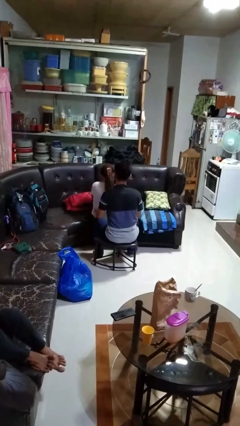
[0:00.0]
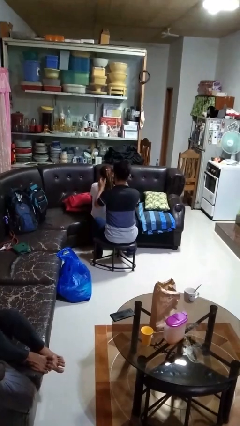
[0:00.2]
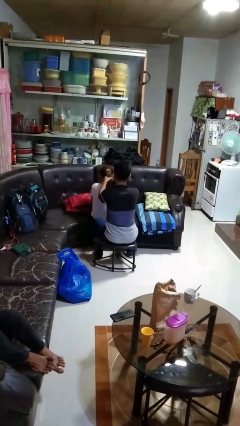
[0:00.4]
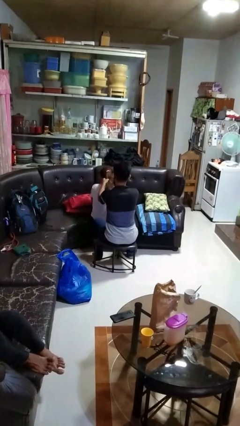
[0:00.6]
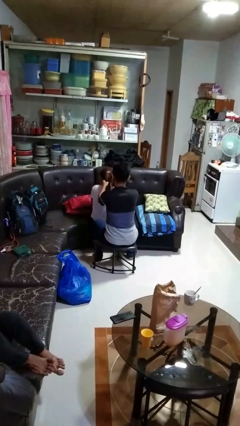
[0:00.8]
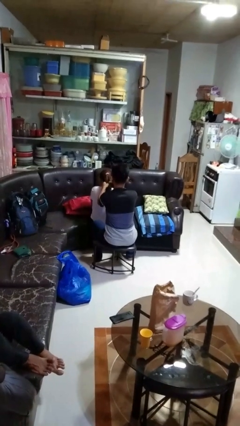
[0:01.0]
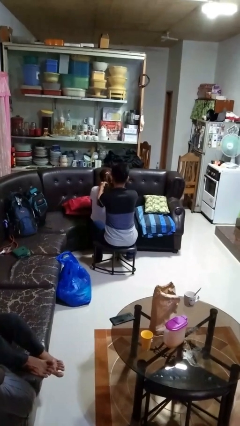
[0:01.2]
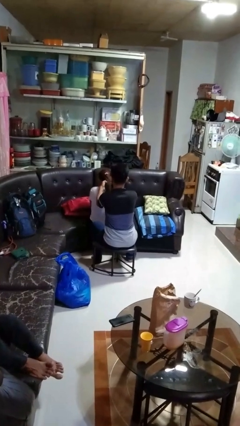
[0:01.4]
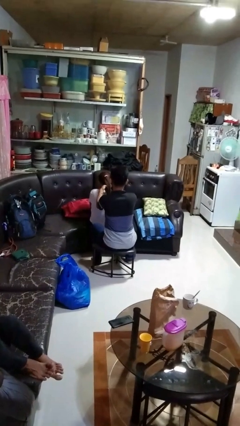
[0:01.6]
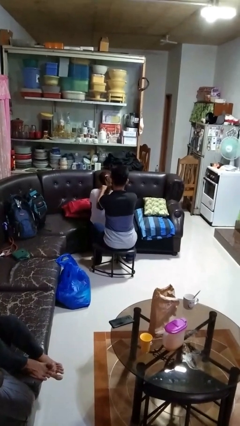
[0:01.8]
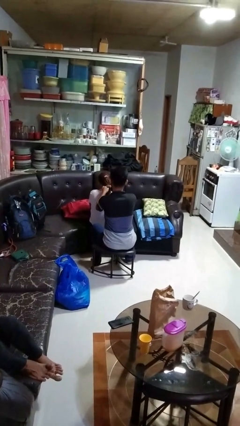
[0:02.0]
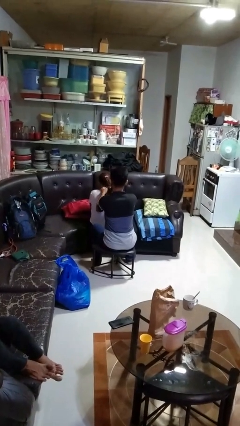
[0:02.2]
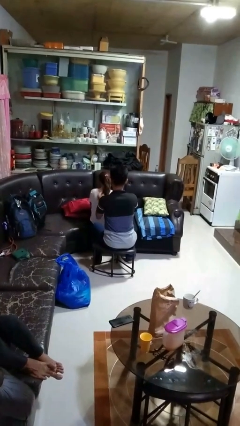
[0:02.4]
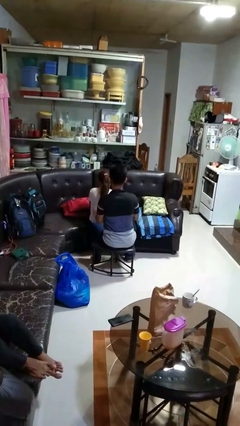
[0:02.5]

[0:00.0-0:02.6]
person braids hair of person

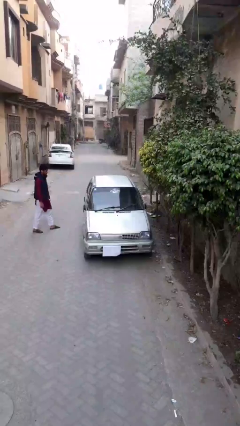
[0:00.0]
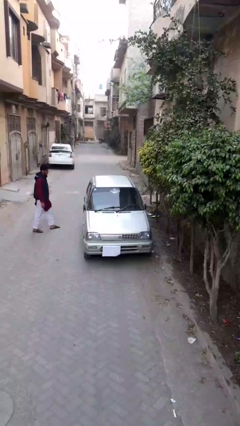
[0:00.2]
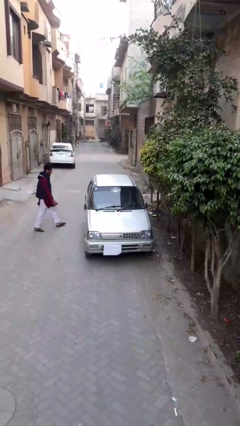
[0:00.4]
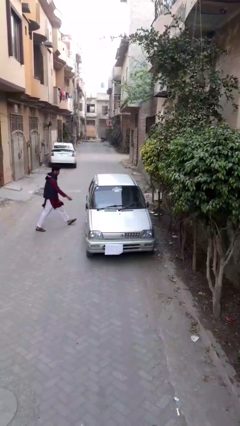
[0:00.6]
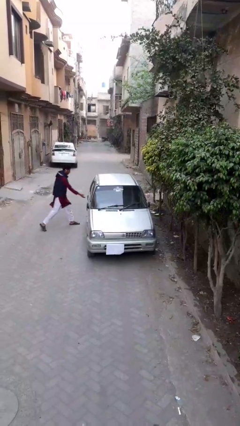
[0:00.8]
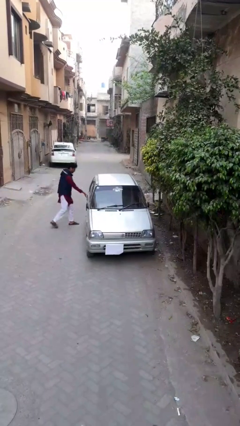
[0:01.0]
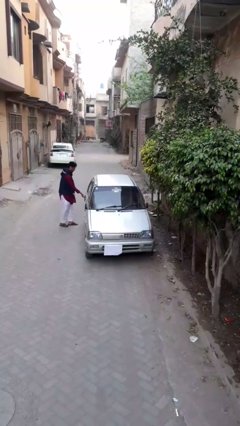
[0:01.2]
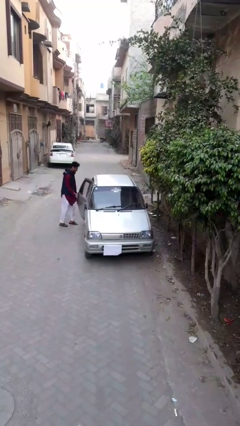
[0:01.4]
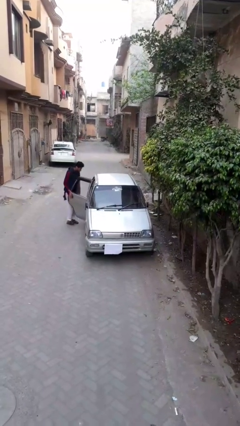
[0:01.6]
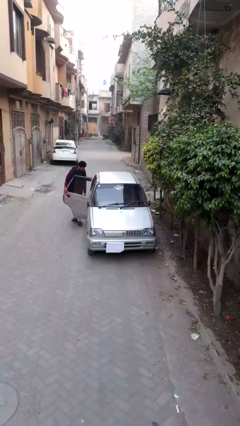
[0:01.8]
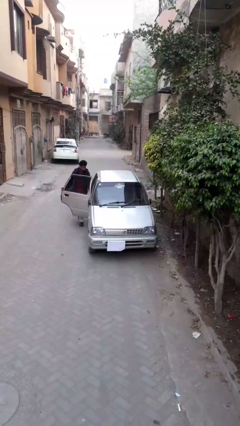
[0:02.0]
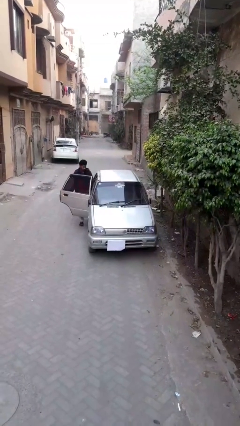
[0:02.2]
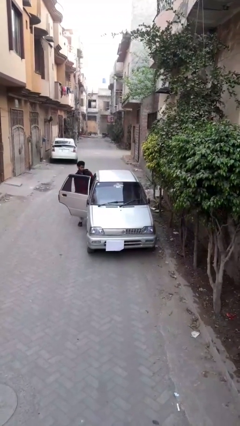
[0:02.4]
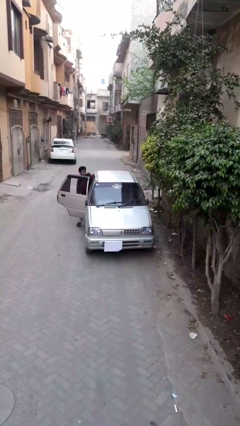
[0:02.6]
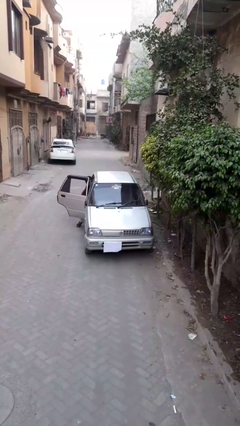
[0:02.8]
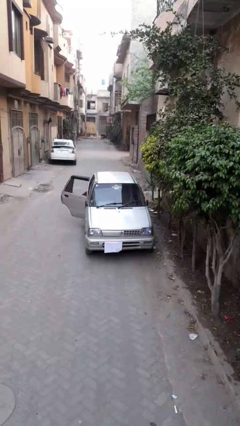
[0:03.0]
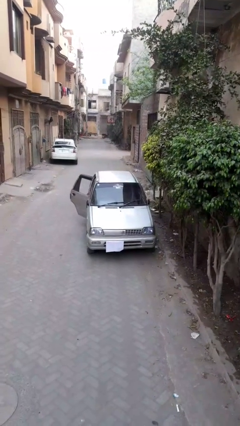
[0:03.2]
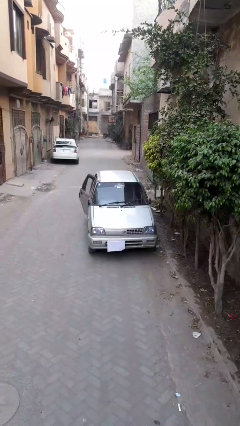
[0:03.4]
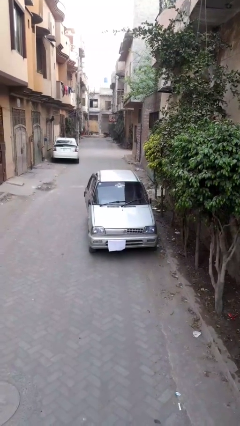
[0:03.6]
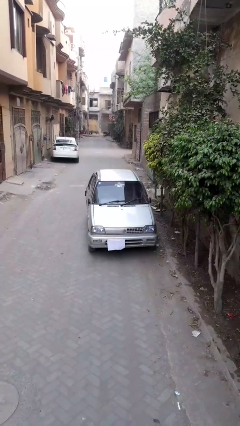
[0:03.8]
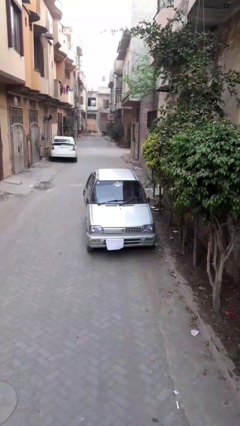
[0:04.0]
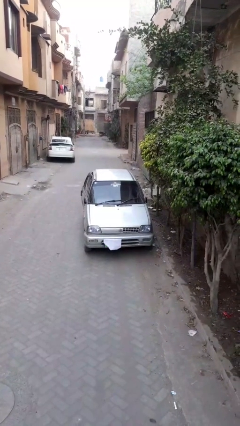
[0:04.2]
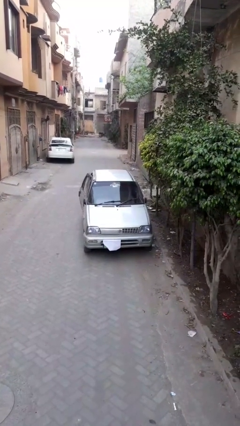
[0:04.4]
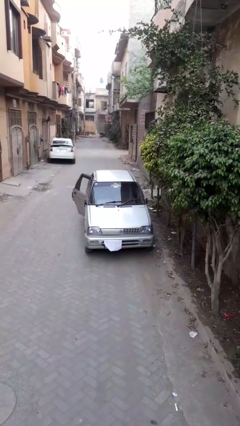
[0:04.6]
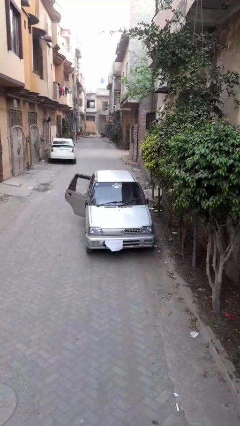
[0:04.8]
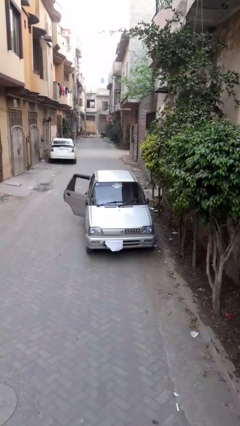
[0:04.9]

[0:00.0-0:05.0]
car picks up person

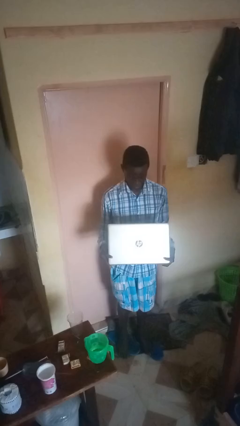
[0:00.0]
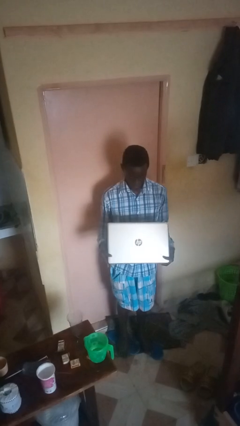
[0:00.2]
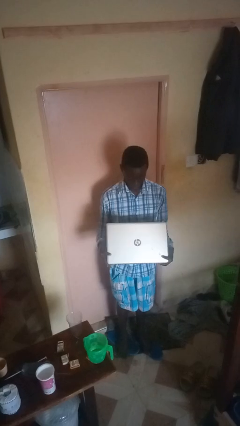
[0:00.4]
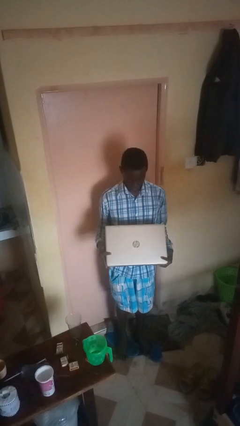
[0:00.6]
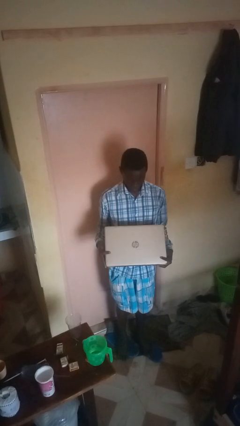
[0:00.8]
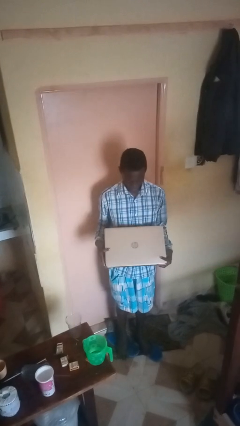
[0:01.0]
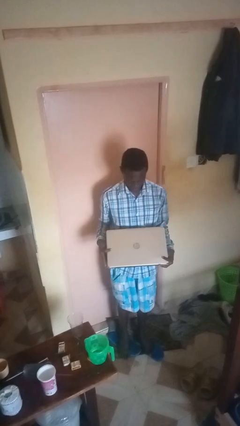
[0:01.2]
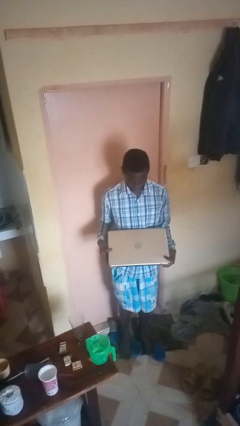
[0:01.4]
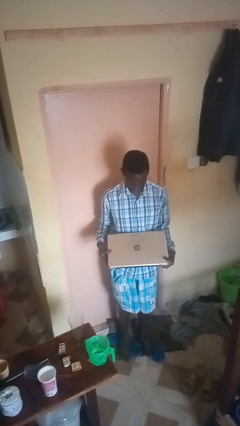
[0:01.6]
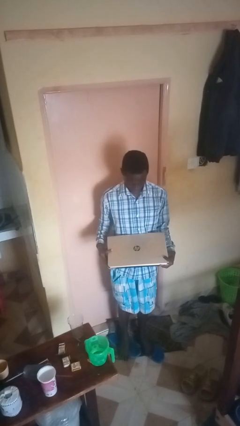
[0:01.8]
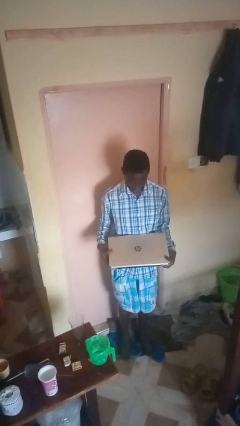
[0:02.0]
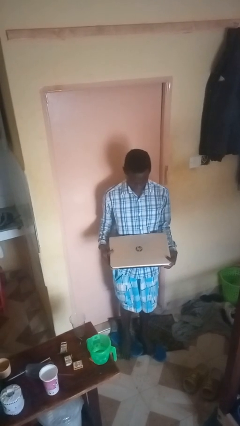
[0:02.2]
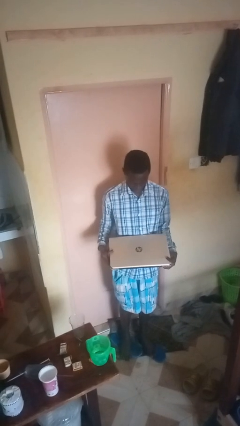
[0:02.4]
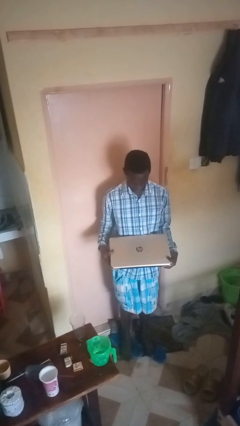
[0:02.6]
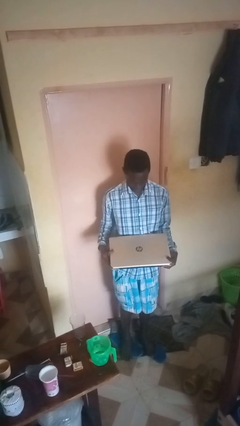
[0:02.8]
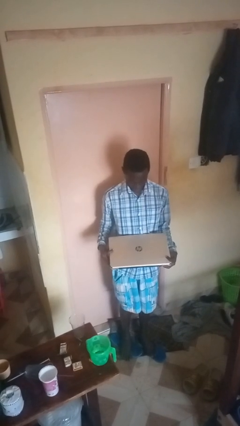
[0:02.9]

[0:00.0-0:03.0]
person closes laptop

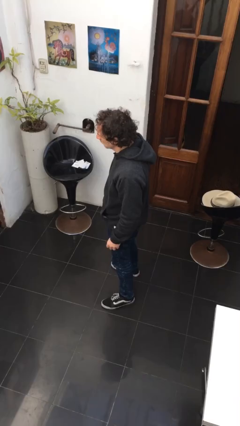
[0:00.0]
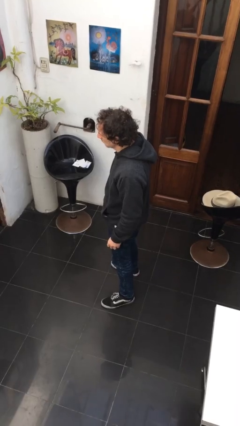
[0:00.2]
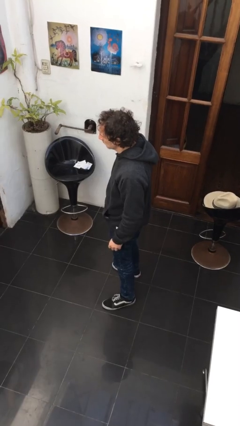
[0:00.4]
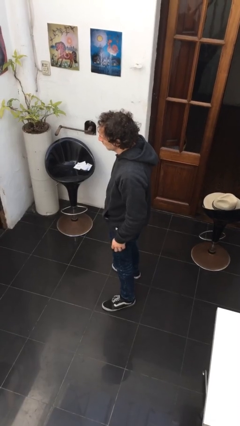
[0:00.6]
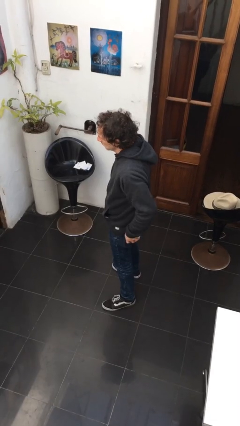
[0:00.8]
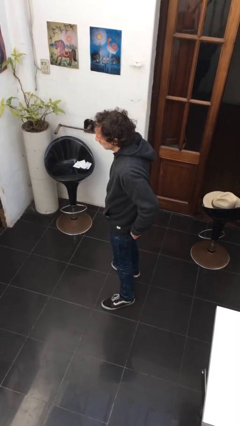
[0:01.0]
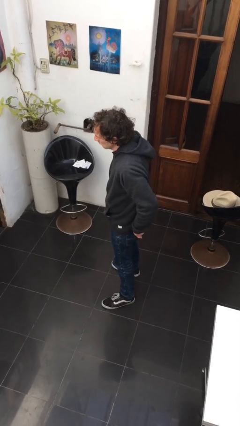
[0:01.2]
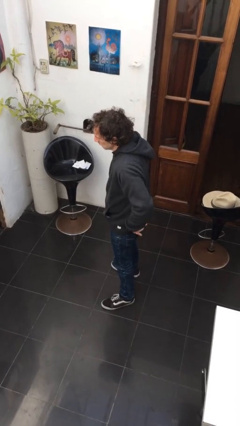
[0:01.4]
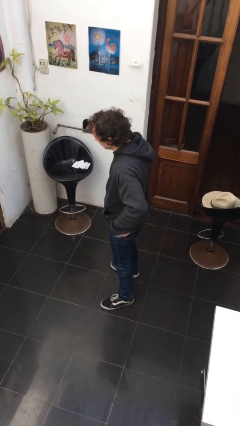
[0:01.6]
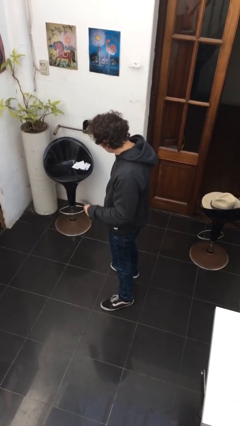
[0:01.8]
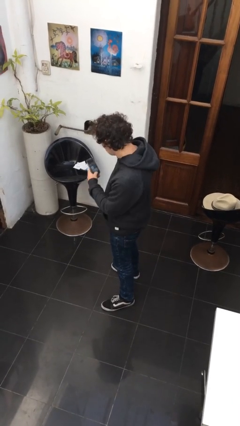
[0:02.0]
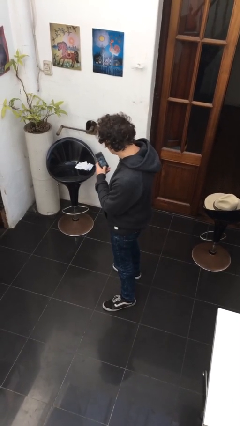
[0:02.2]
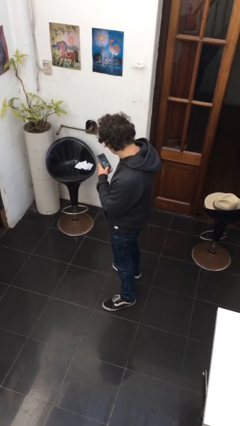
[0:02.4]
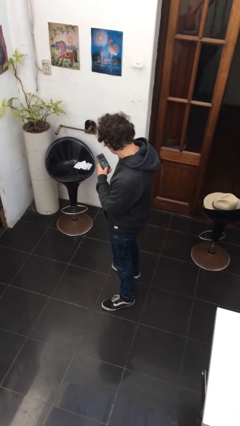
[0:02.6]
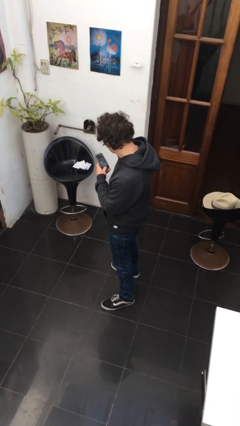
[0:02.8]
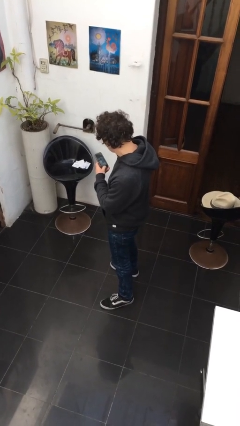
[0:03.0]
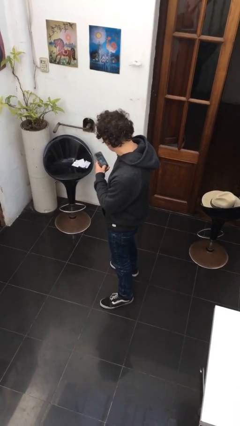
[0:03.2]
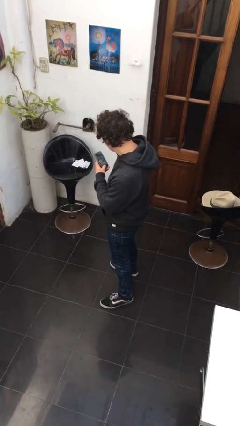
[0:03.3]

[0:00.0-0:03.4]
person takes phone from pocket

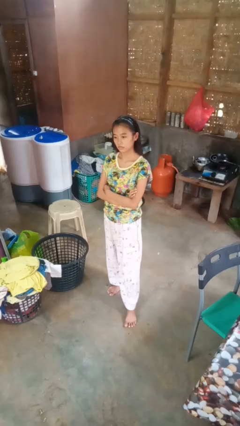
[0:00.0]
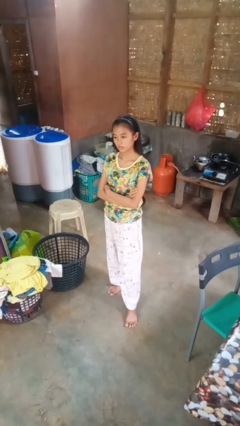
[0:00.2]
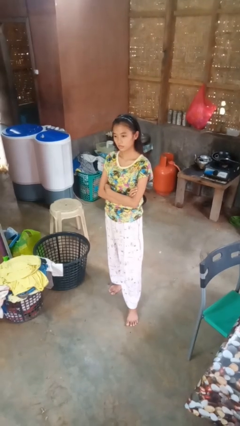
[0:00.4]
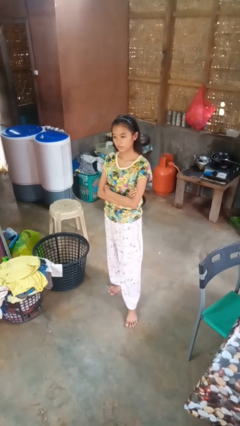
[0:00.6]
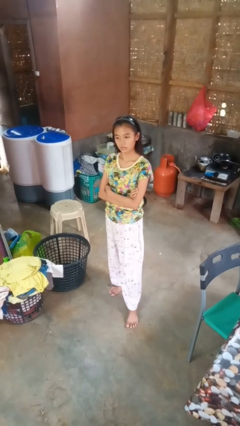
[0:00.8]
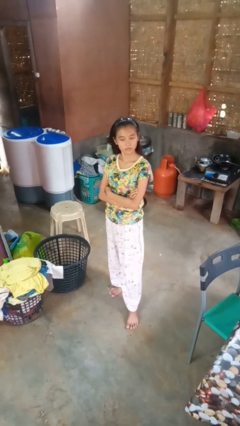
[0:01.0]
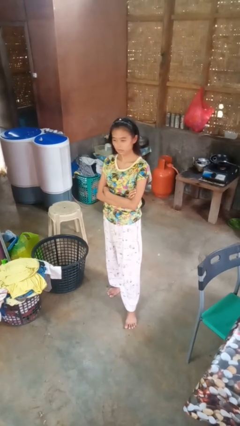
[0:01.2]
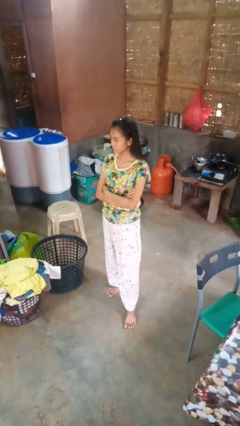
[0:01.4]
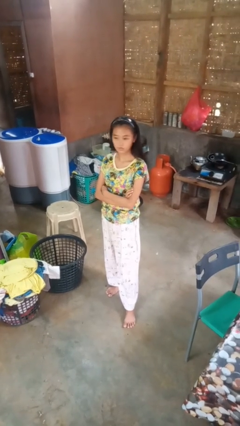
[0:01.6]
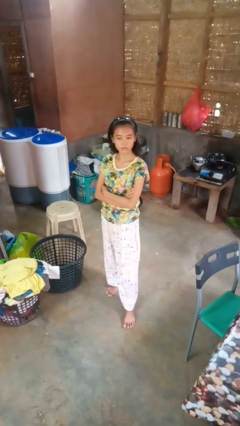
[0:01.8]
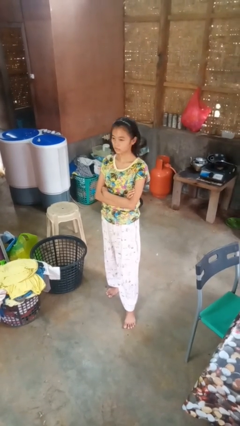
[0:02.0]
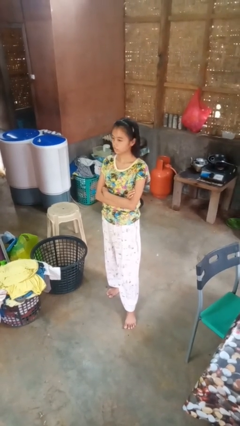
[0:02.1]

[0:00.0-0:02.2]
person shakes head

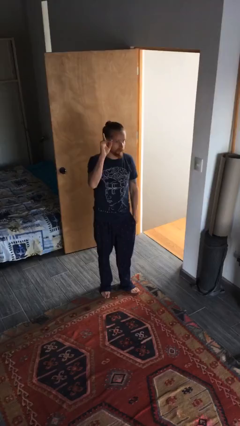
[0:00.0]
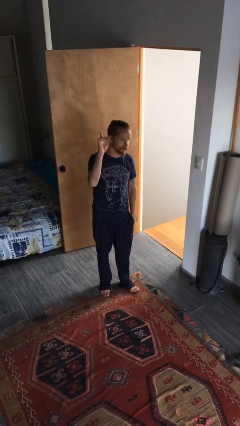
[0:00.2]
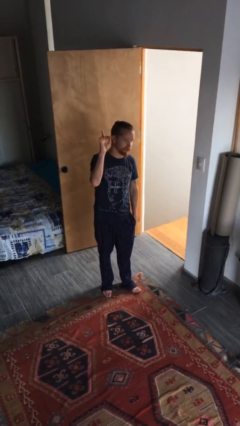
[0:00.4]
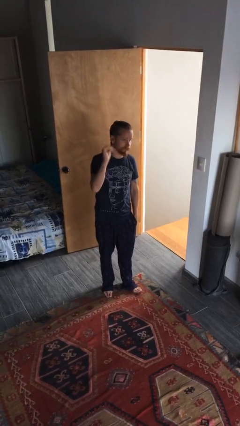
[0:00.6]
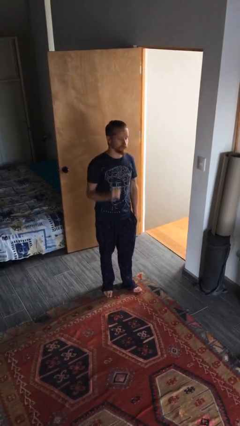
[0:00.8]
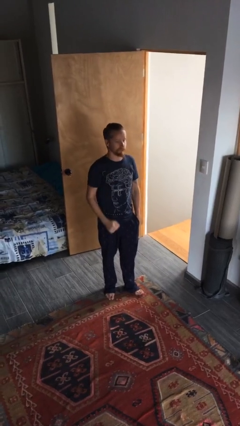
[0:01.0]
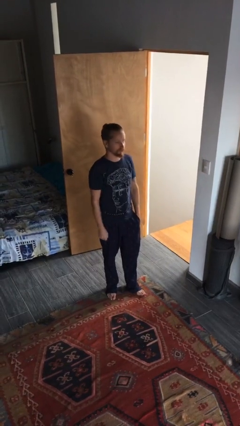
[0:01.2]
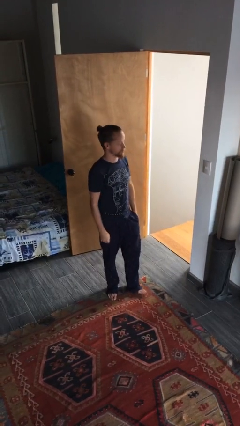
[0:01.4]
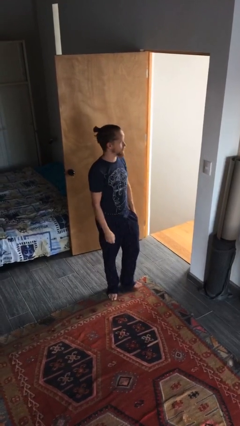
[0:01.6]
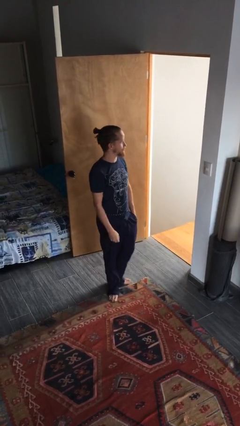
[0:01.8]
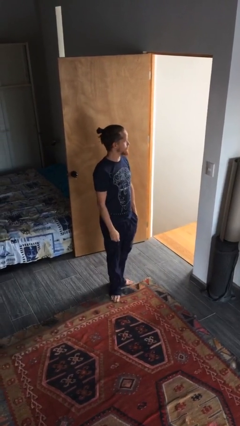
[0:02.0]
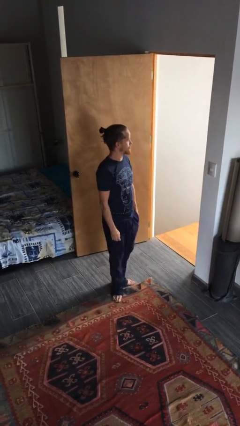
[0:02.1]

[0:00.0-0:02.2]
person gestures lower hand
